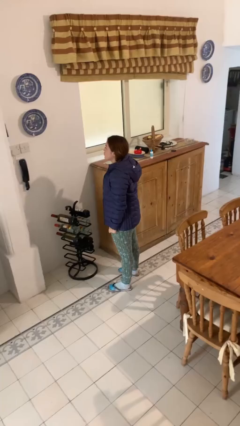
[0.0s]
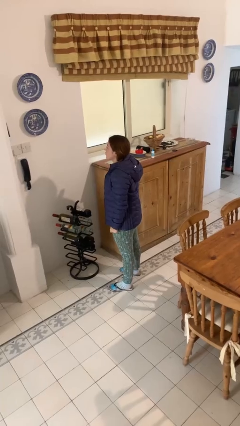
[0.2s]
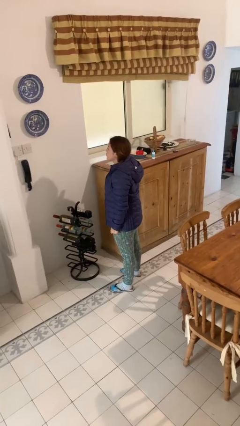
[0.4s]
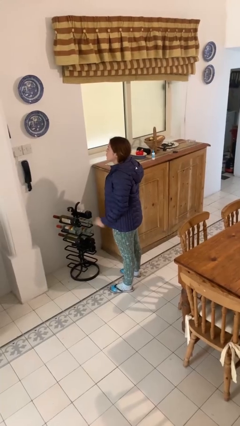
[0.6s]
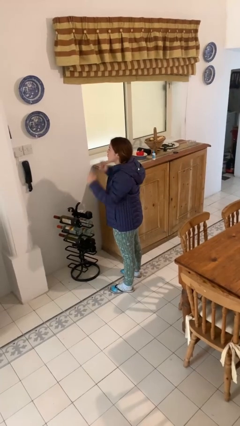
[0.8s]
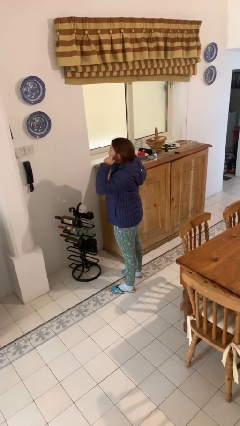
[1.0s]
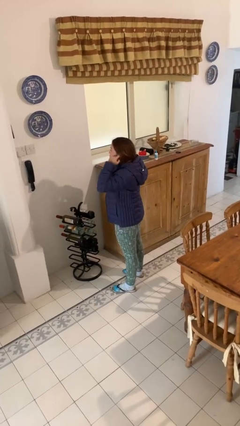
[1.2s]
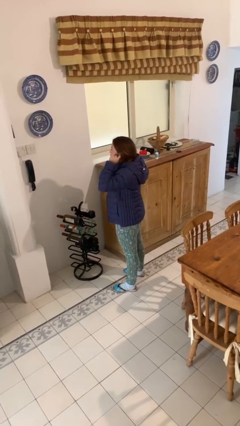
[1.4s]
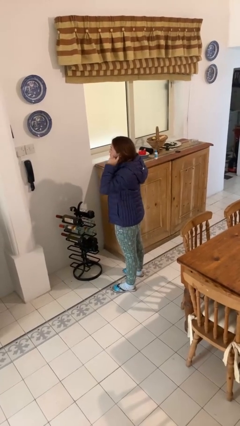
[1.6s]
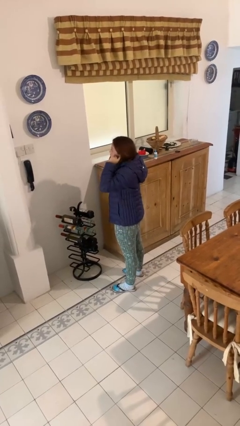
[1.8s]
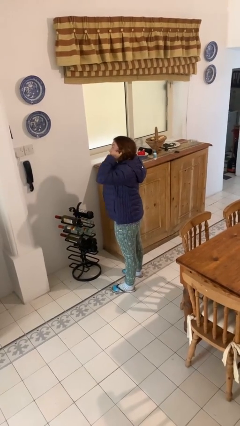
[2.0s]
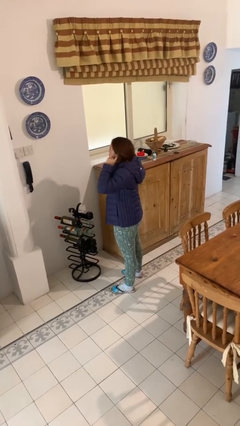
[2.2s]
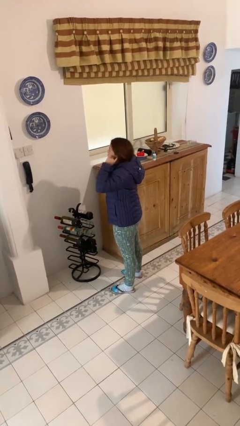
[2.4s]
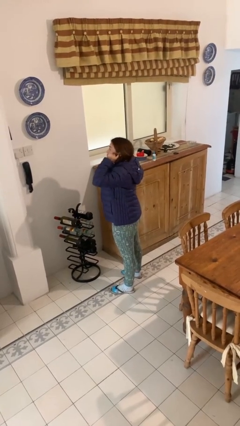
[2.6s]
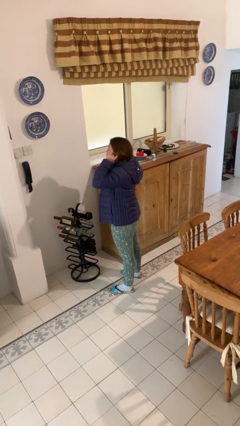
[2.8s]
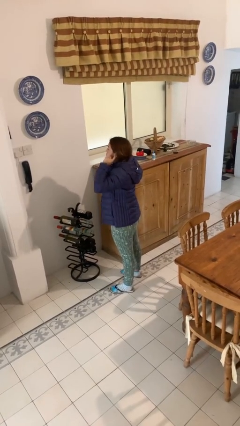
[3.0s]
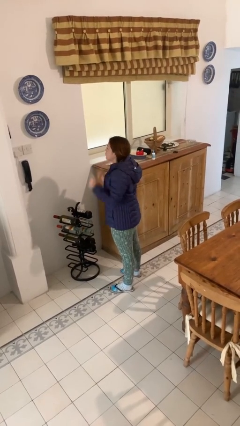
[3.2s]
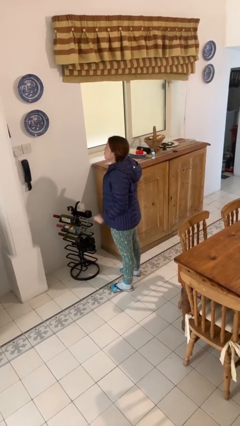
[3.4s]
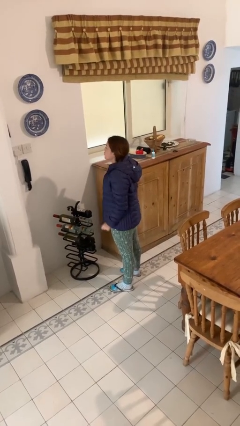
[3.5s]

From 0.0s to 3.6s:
person puts fingers in ear

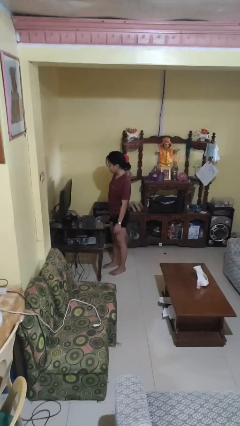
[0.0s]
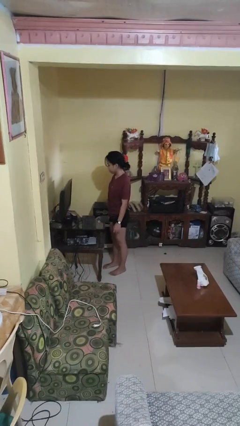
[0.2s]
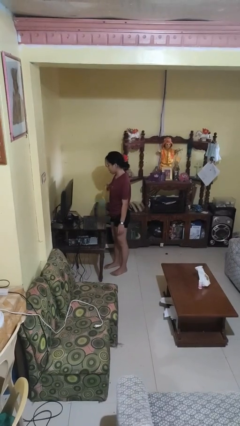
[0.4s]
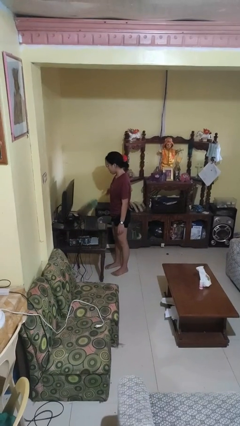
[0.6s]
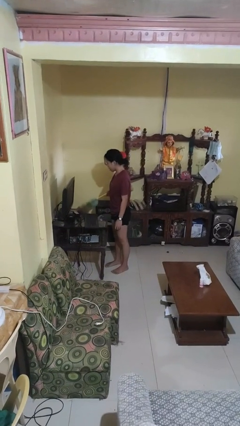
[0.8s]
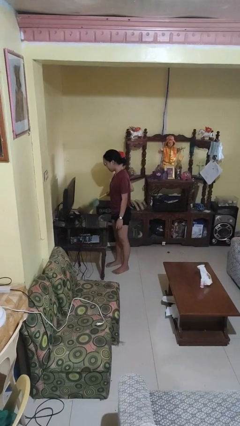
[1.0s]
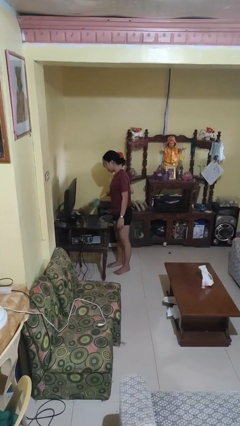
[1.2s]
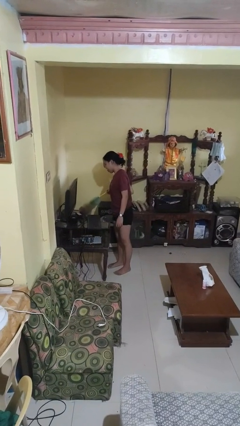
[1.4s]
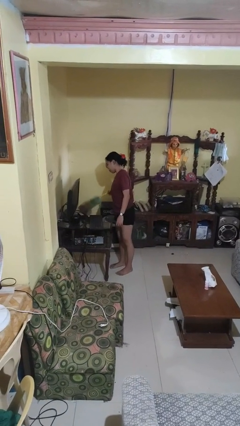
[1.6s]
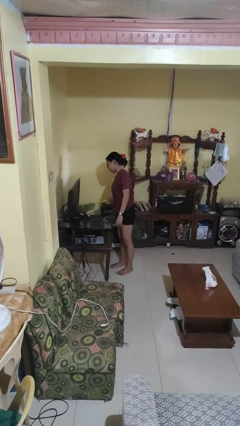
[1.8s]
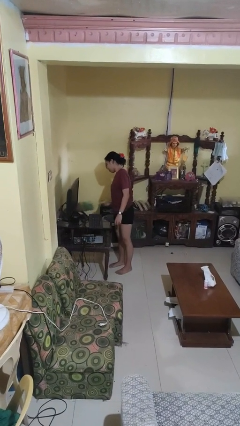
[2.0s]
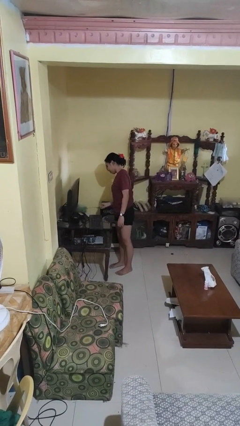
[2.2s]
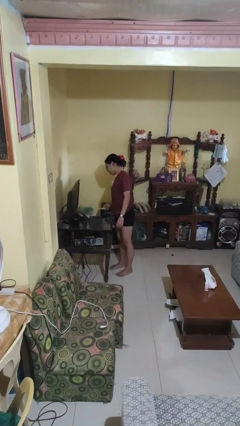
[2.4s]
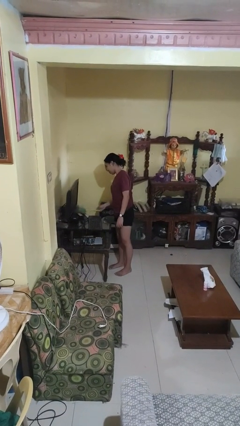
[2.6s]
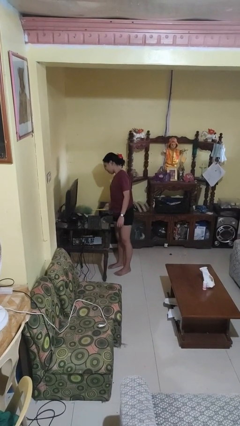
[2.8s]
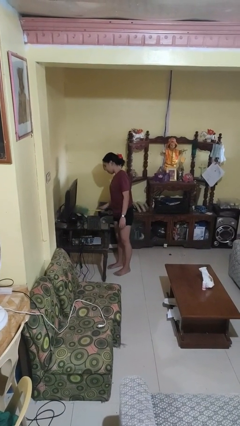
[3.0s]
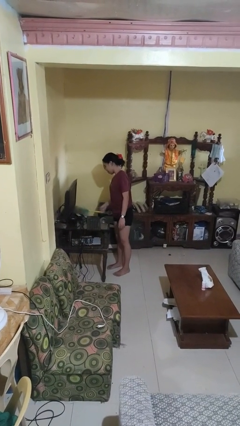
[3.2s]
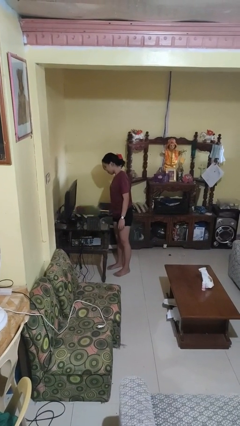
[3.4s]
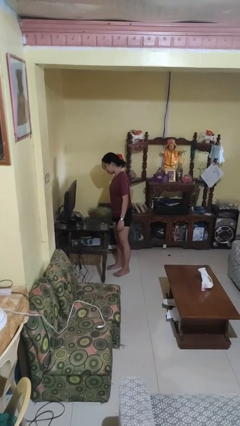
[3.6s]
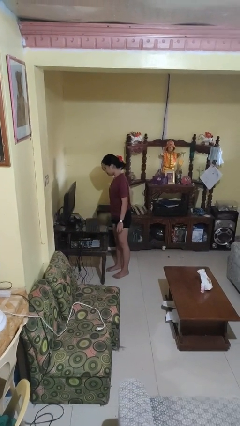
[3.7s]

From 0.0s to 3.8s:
person dusts furniture

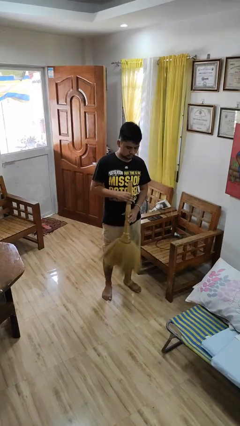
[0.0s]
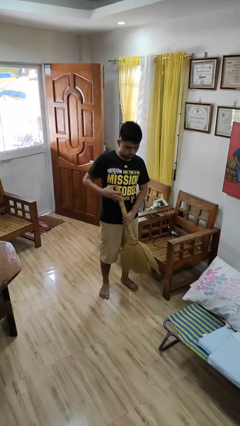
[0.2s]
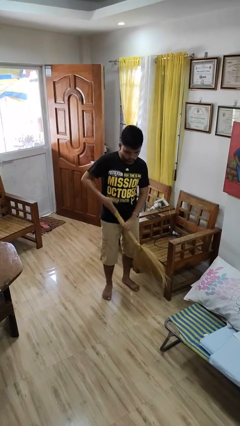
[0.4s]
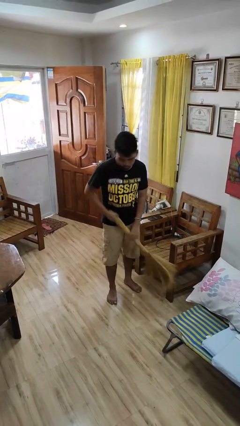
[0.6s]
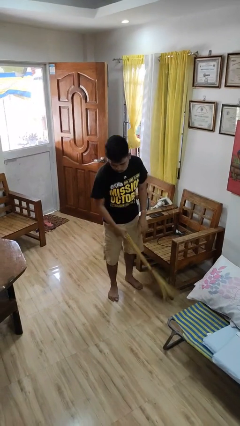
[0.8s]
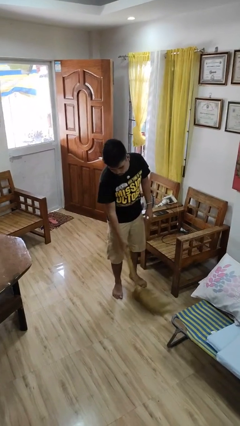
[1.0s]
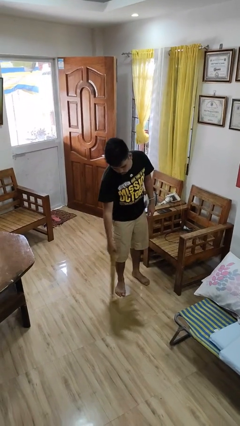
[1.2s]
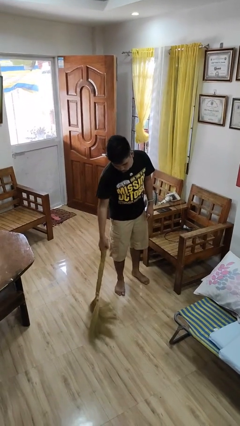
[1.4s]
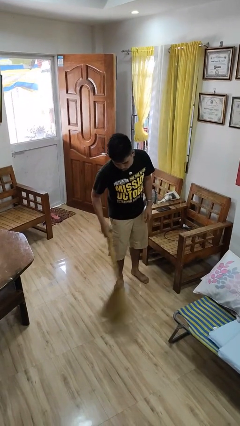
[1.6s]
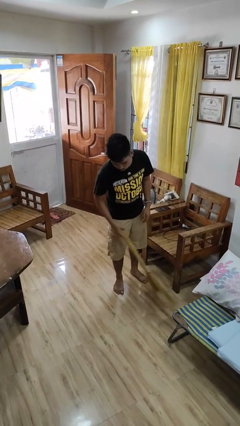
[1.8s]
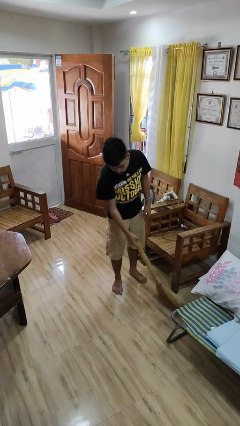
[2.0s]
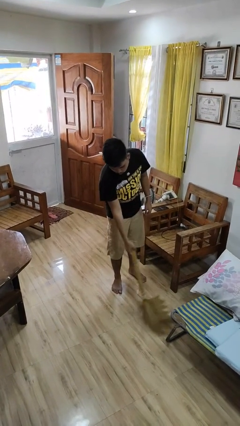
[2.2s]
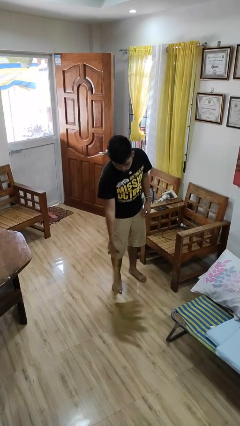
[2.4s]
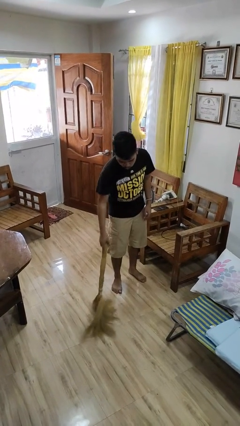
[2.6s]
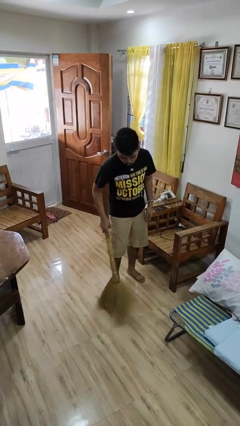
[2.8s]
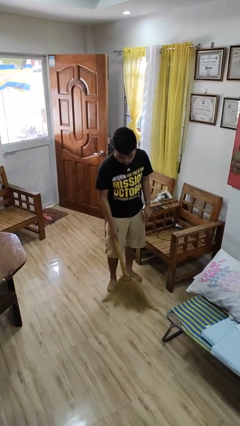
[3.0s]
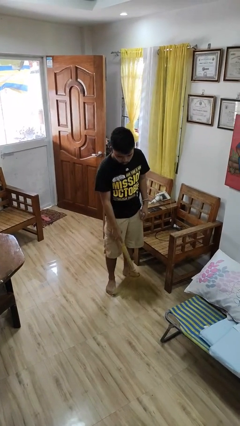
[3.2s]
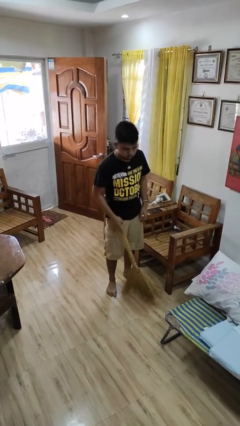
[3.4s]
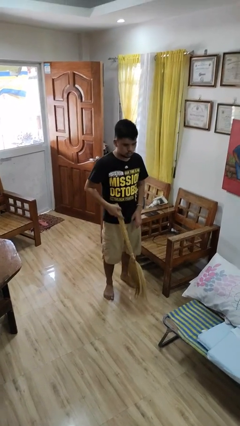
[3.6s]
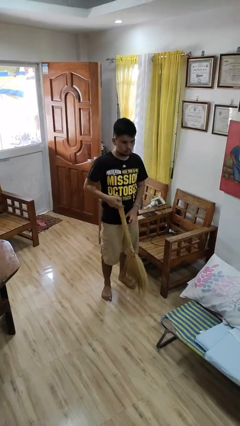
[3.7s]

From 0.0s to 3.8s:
person sweeps floor

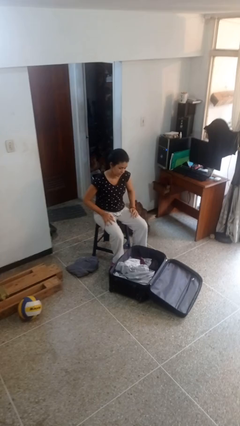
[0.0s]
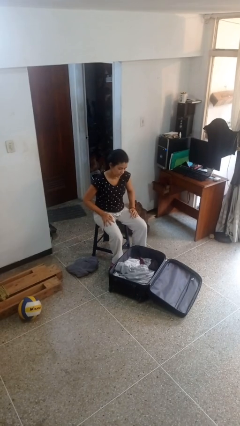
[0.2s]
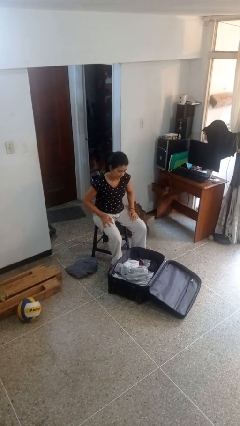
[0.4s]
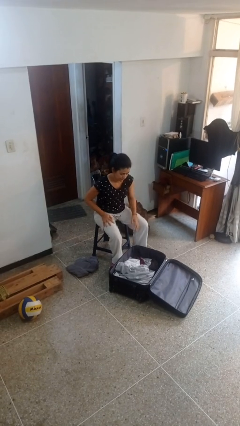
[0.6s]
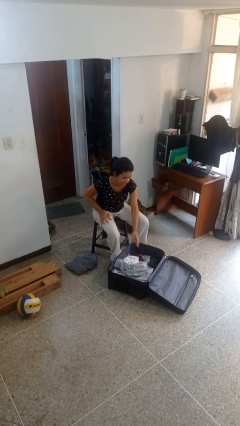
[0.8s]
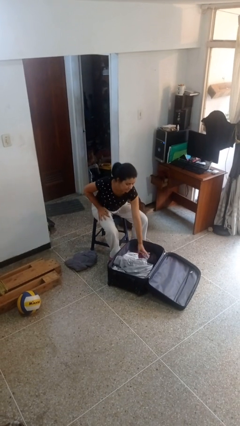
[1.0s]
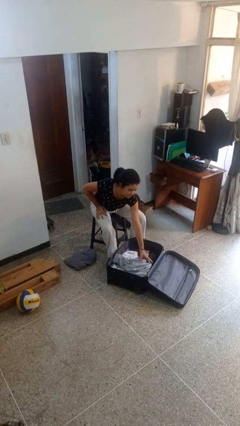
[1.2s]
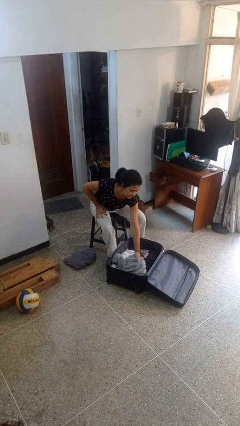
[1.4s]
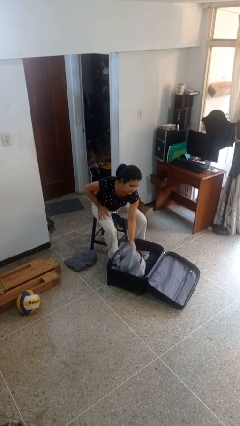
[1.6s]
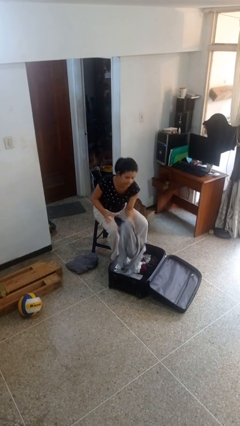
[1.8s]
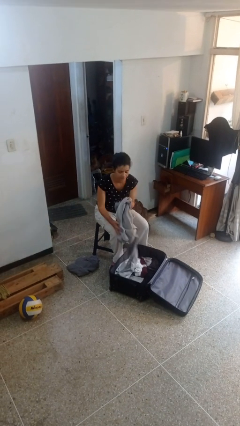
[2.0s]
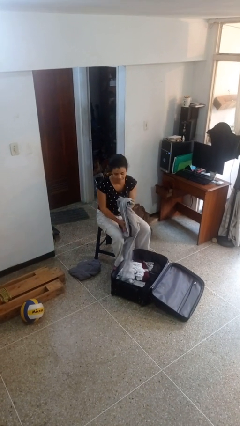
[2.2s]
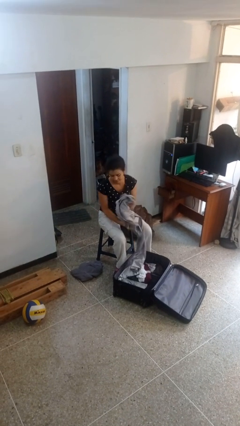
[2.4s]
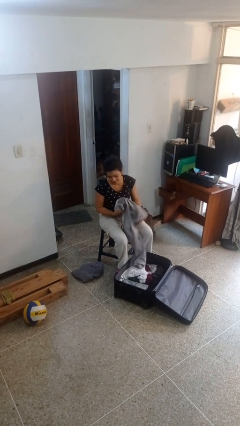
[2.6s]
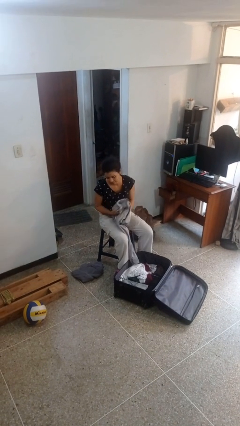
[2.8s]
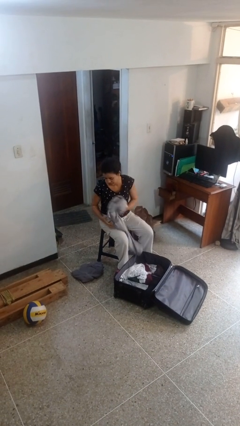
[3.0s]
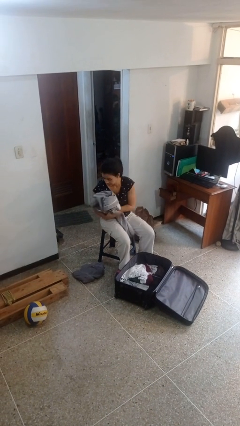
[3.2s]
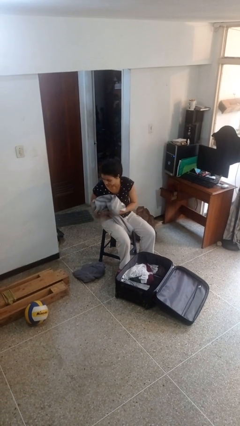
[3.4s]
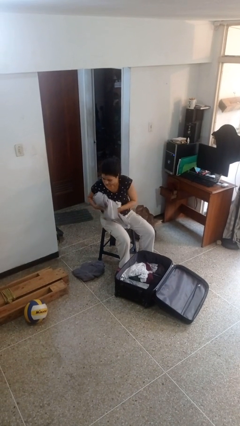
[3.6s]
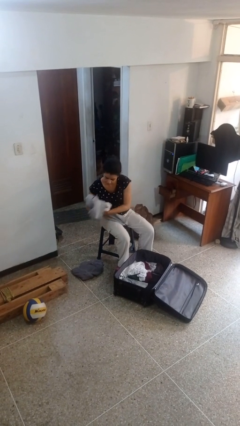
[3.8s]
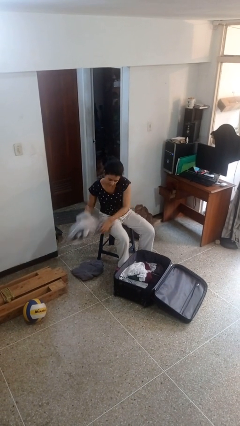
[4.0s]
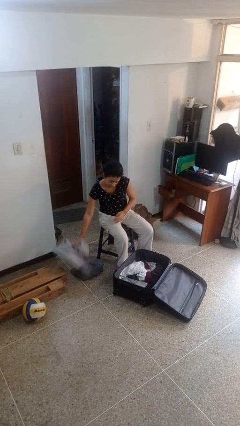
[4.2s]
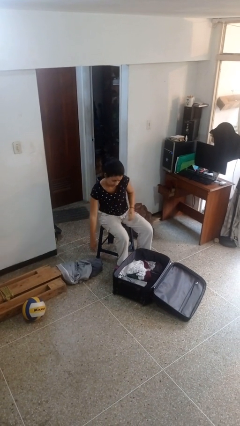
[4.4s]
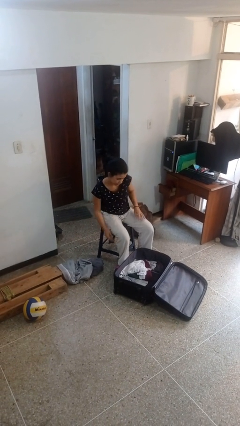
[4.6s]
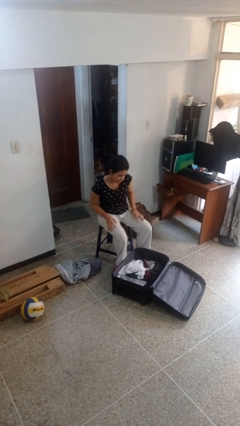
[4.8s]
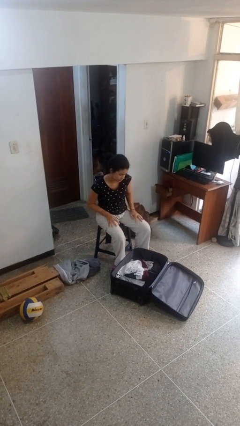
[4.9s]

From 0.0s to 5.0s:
person unloads clothes from suitcase

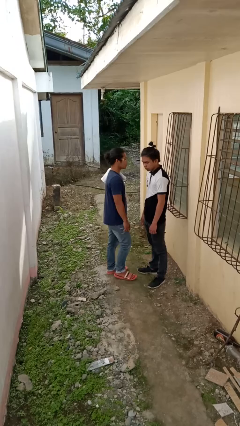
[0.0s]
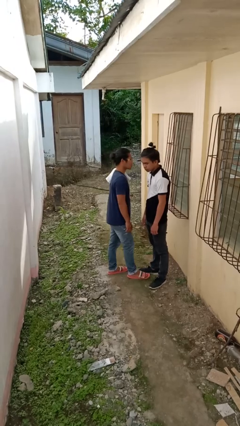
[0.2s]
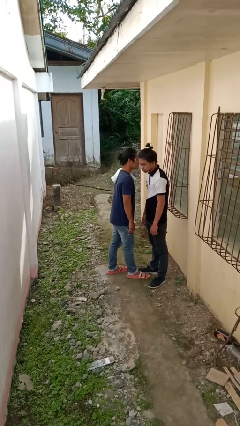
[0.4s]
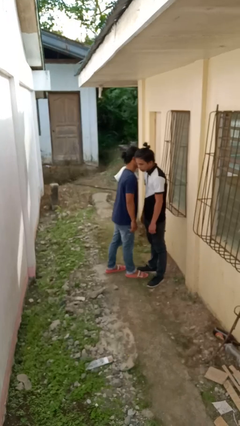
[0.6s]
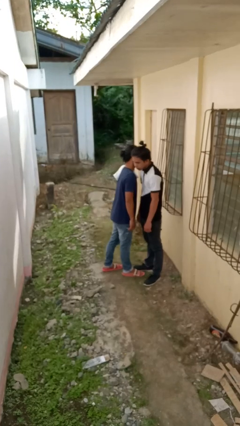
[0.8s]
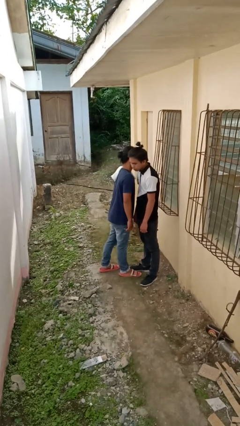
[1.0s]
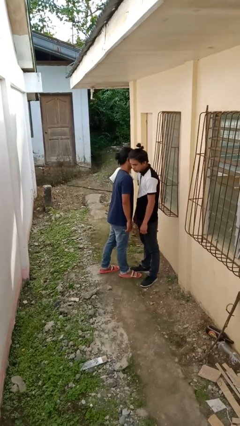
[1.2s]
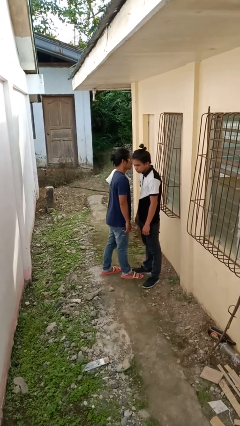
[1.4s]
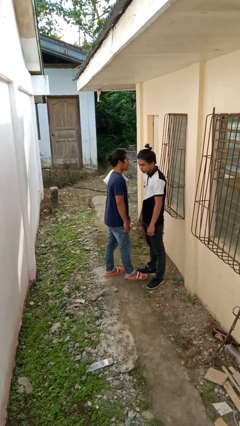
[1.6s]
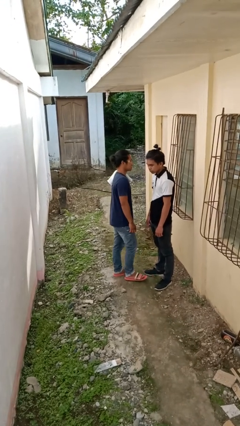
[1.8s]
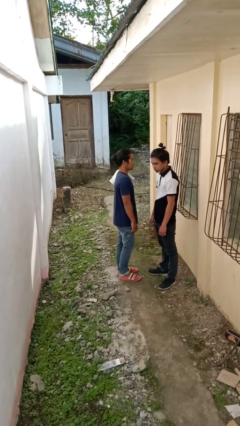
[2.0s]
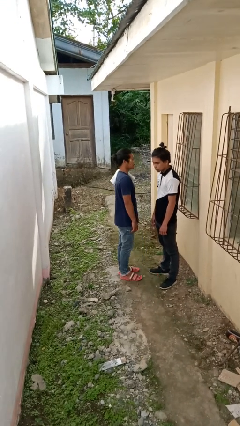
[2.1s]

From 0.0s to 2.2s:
person kisses cheek of person
